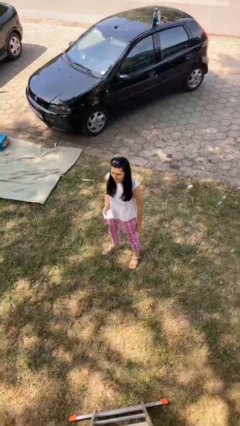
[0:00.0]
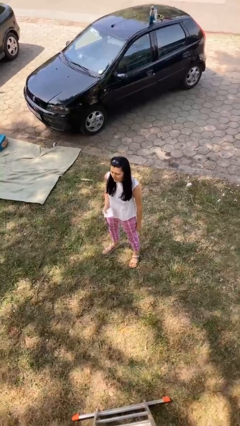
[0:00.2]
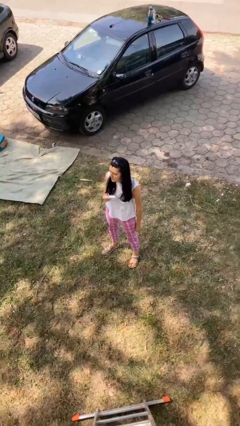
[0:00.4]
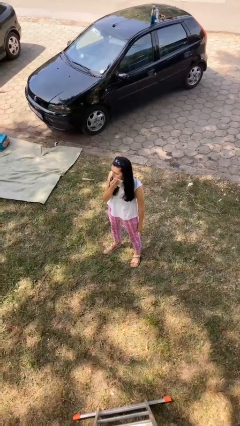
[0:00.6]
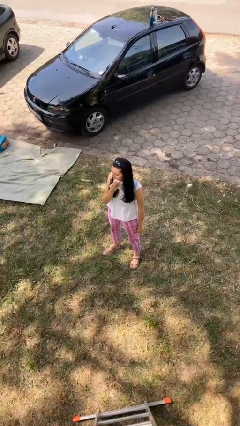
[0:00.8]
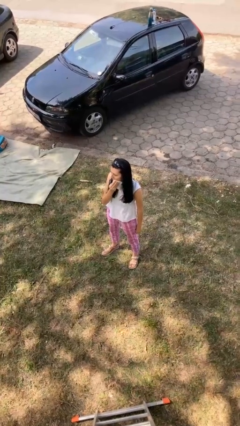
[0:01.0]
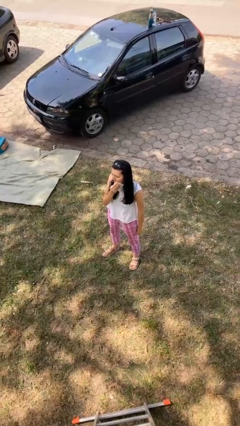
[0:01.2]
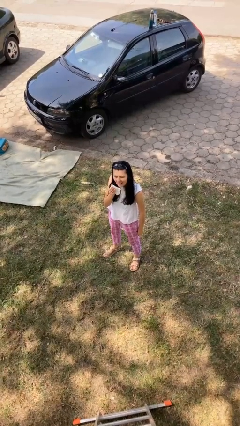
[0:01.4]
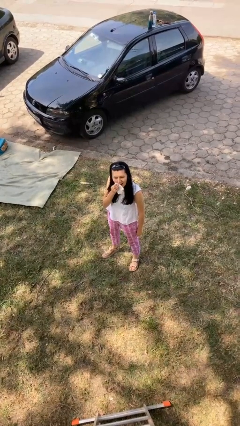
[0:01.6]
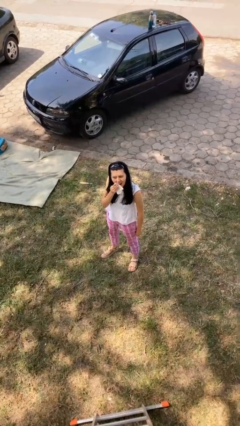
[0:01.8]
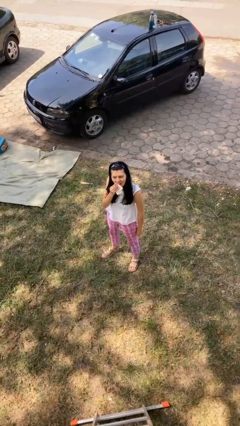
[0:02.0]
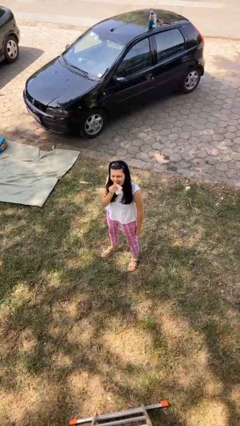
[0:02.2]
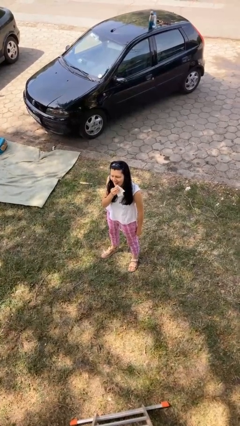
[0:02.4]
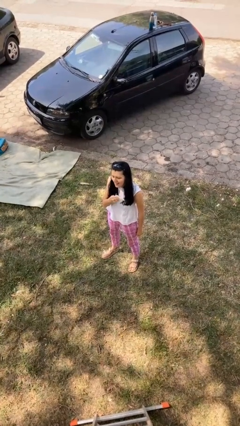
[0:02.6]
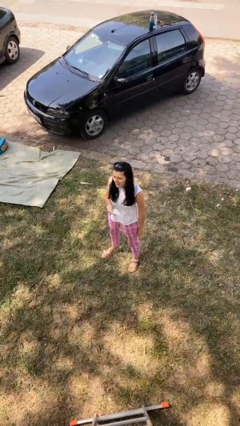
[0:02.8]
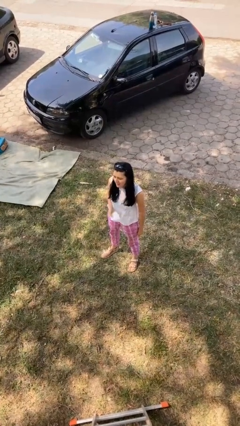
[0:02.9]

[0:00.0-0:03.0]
person wipes mouth with napkin

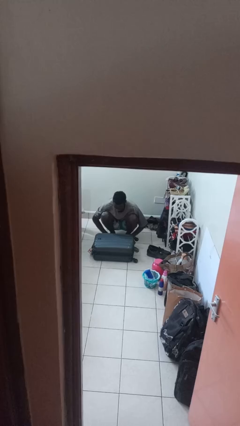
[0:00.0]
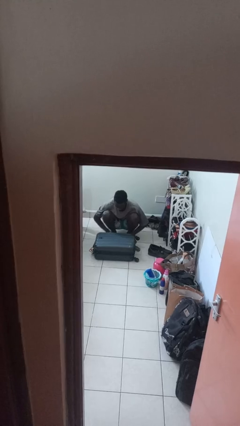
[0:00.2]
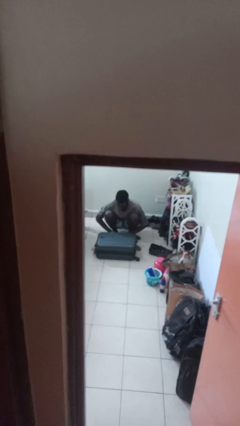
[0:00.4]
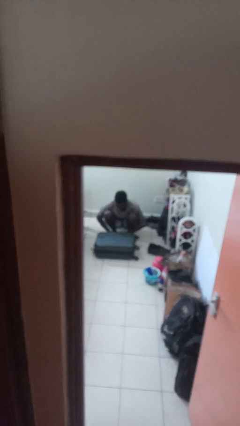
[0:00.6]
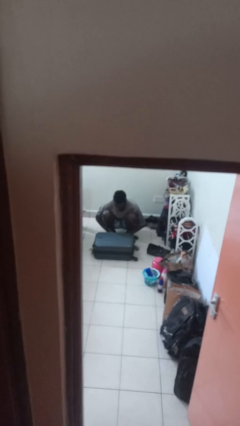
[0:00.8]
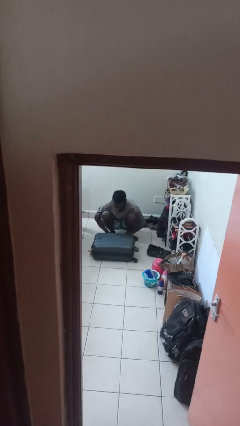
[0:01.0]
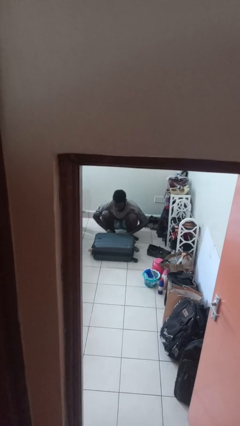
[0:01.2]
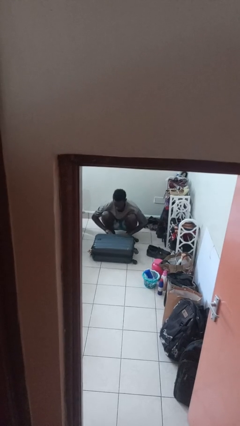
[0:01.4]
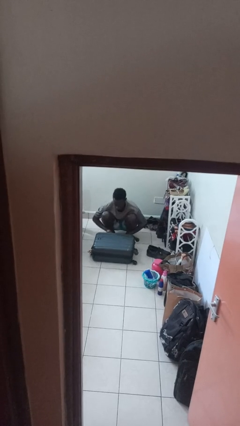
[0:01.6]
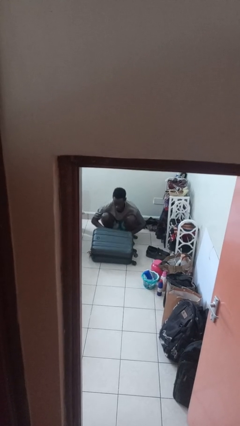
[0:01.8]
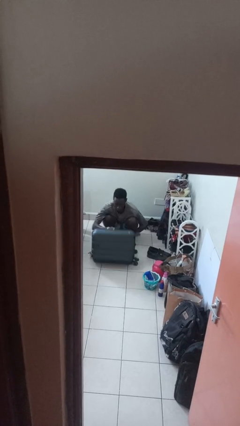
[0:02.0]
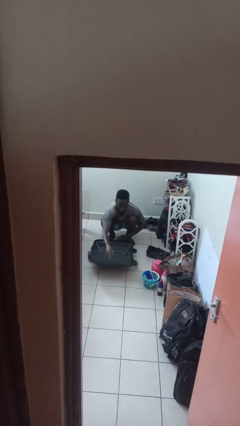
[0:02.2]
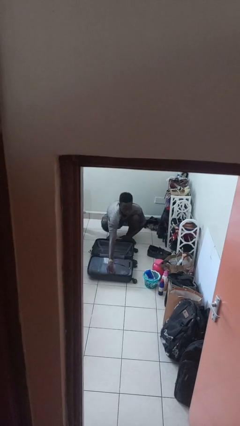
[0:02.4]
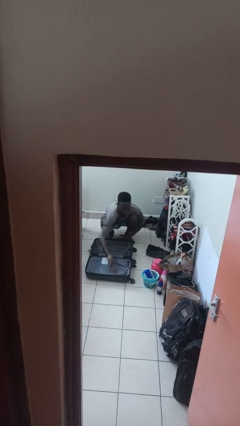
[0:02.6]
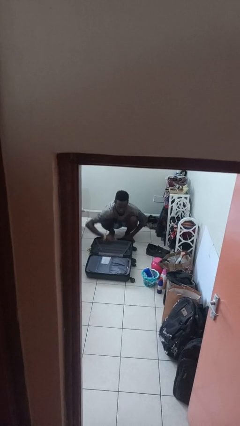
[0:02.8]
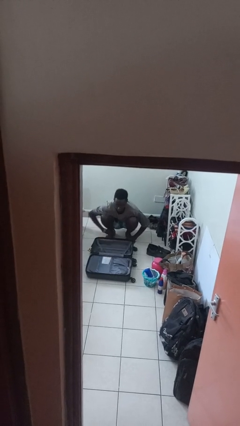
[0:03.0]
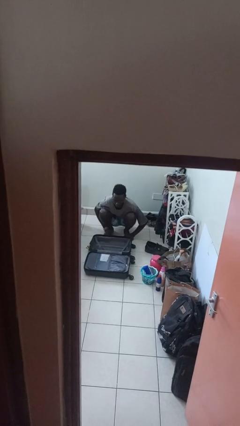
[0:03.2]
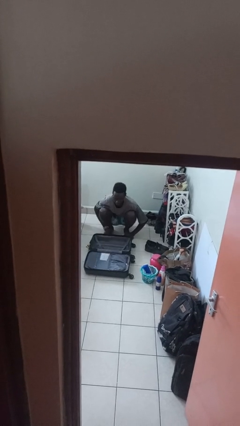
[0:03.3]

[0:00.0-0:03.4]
person opens suitcase

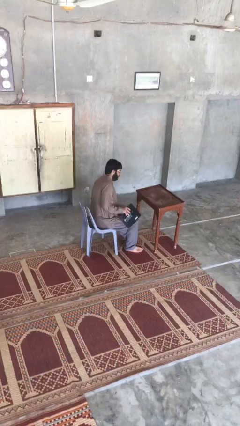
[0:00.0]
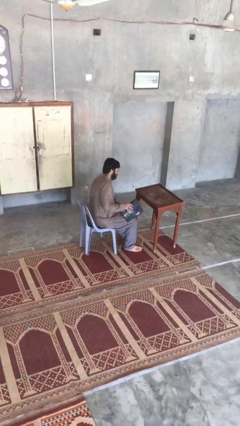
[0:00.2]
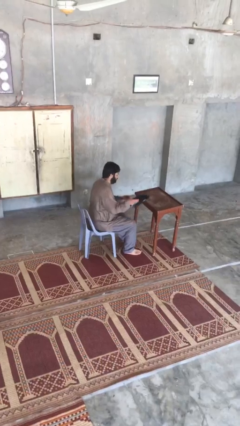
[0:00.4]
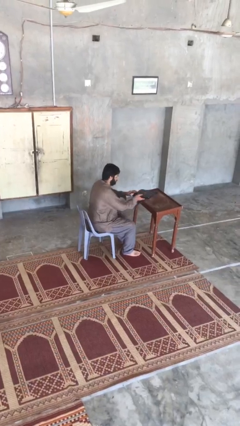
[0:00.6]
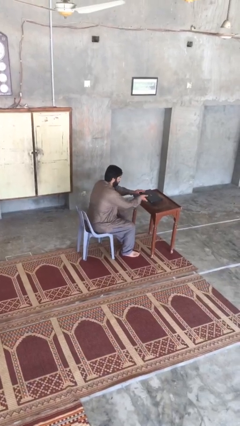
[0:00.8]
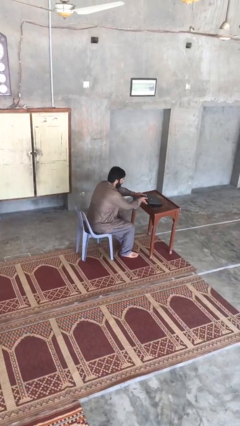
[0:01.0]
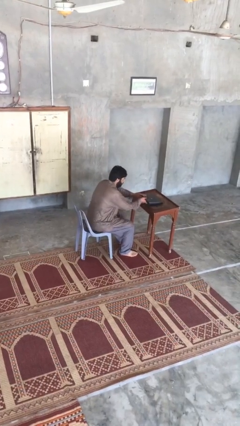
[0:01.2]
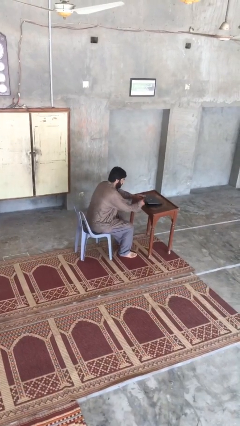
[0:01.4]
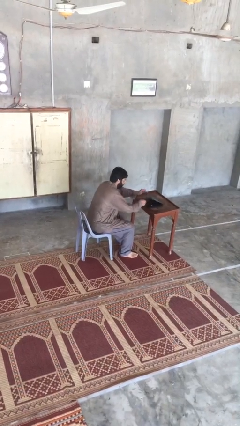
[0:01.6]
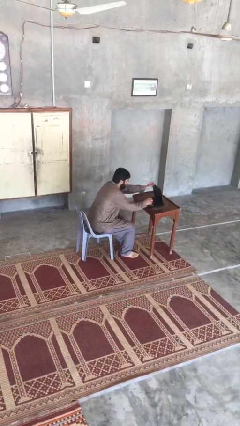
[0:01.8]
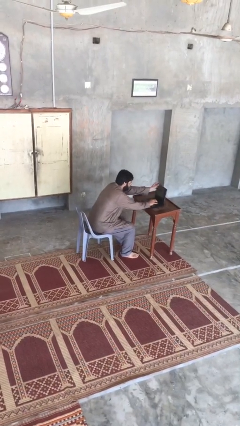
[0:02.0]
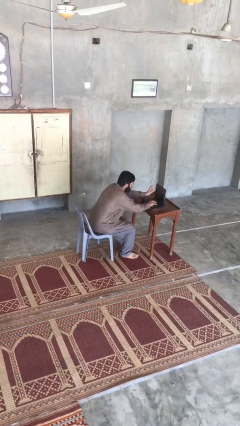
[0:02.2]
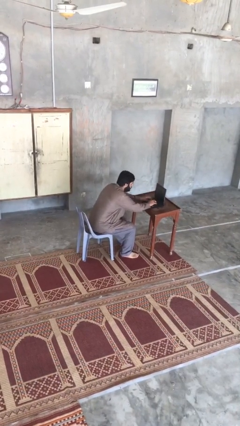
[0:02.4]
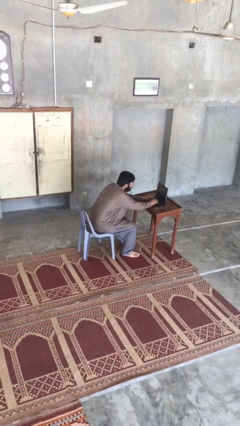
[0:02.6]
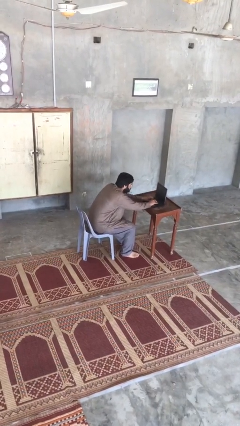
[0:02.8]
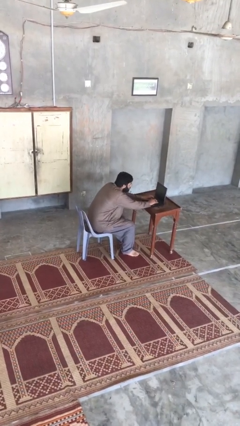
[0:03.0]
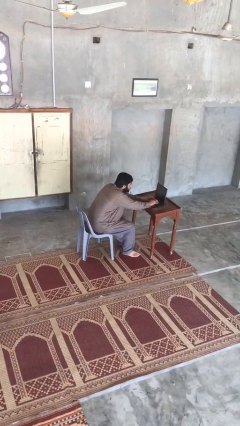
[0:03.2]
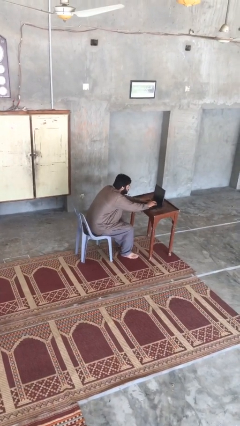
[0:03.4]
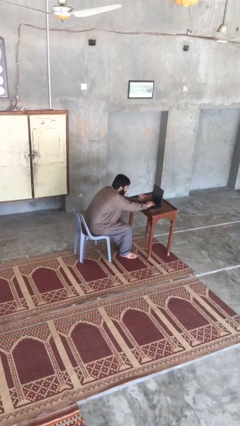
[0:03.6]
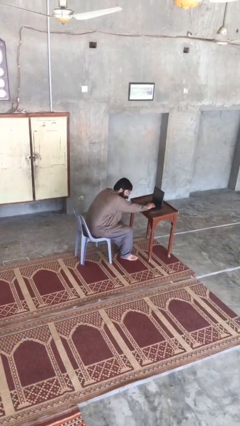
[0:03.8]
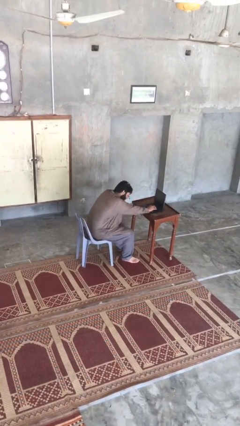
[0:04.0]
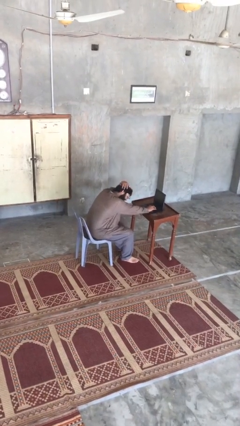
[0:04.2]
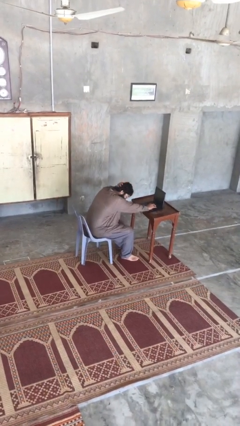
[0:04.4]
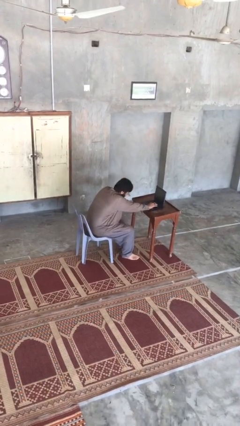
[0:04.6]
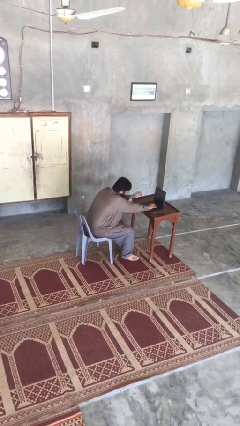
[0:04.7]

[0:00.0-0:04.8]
person interacts with laptop

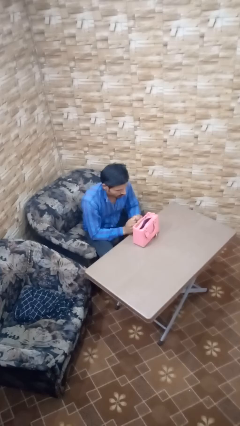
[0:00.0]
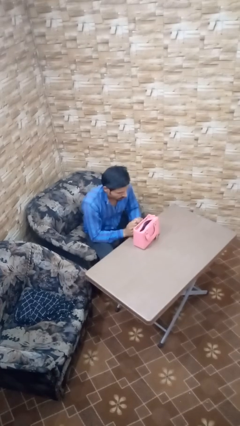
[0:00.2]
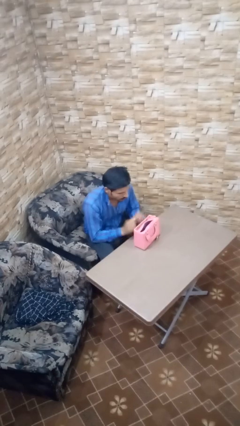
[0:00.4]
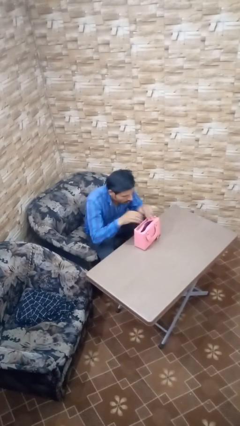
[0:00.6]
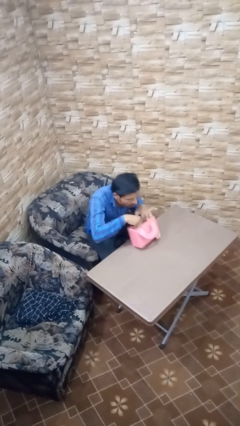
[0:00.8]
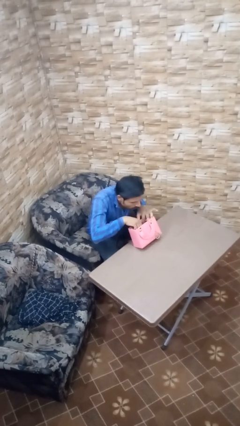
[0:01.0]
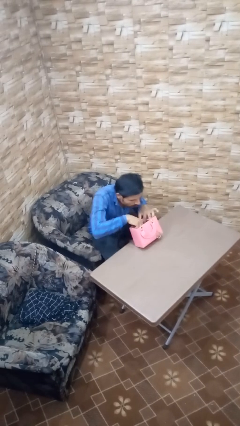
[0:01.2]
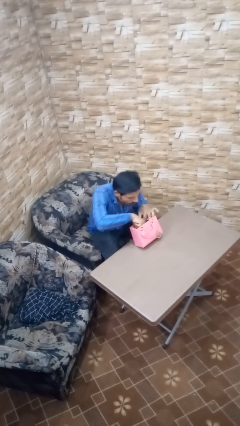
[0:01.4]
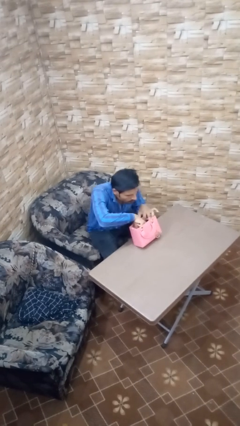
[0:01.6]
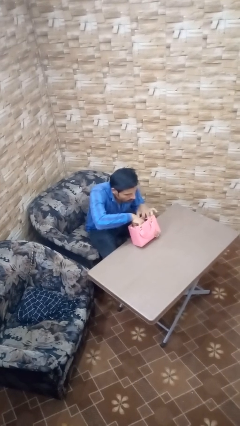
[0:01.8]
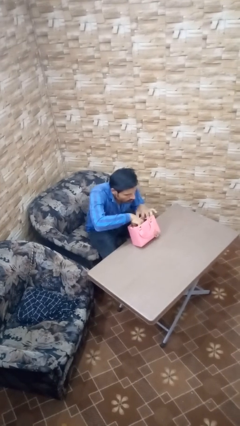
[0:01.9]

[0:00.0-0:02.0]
person searches in purse

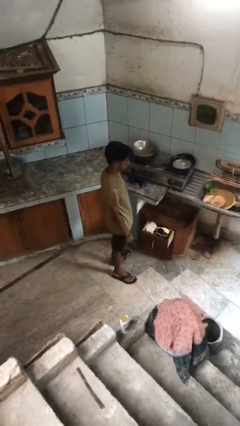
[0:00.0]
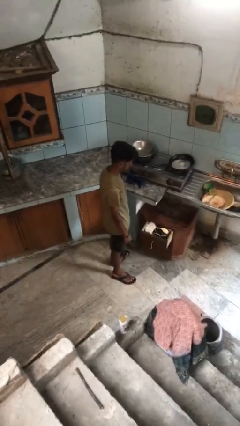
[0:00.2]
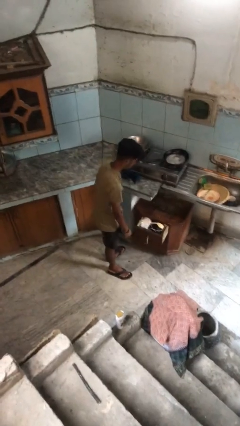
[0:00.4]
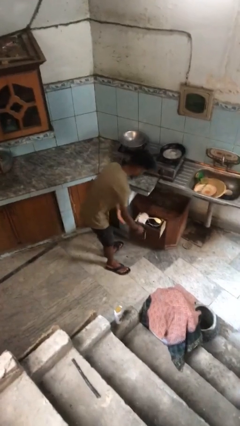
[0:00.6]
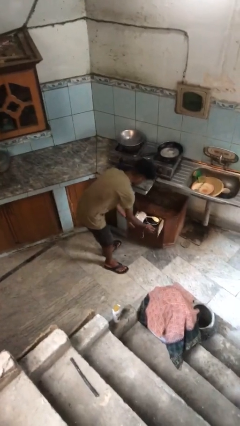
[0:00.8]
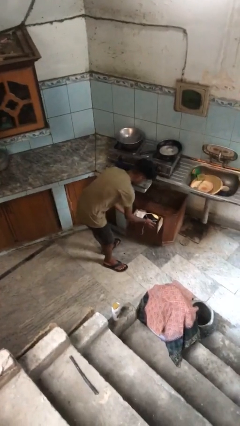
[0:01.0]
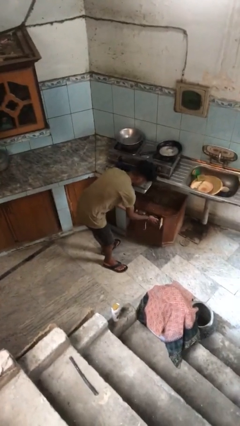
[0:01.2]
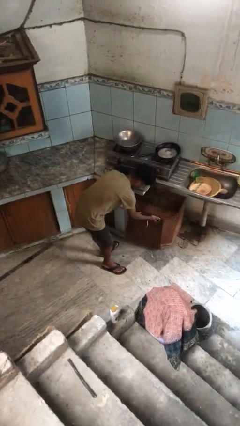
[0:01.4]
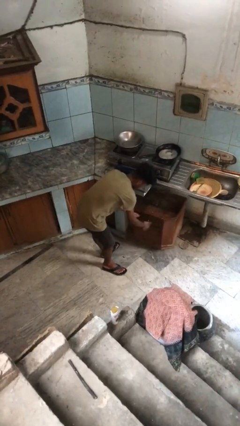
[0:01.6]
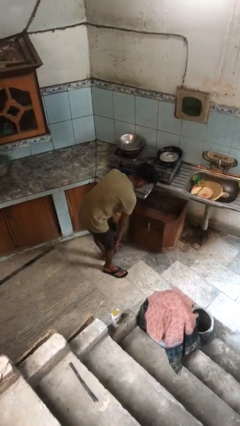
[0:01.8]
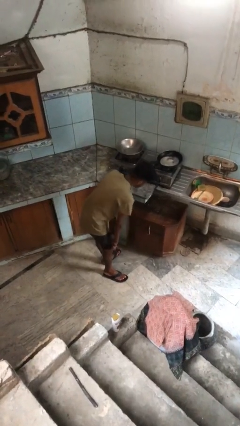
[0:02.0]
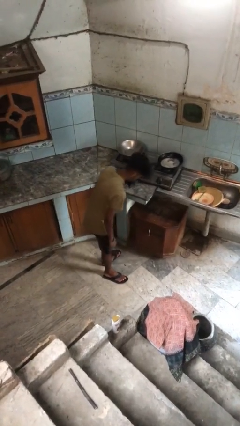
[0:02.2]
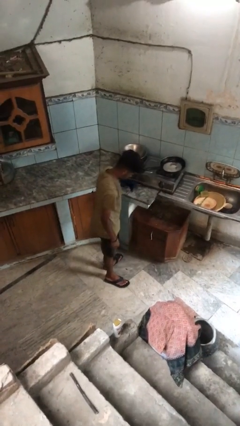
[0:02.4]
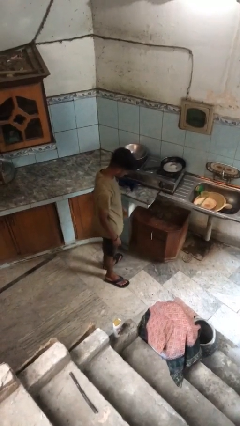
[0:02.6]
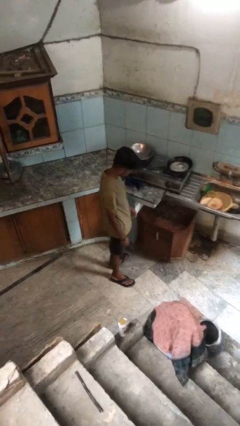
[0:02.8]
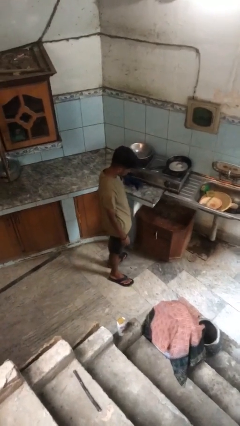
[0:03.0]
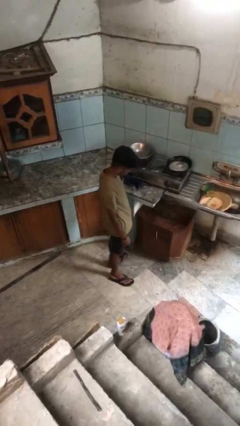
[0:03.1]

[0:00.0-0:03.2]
person closes kitchen drawer

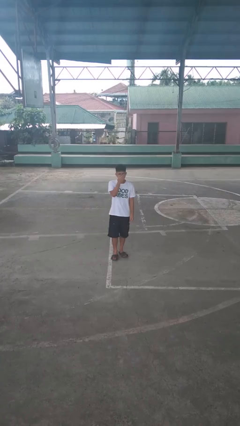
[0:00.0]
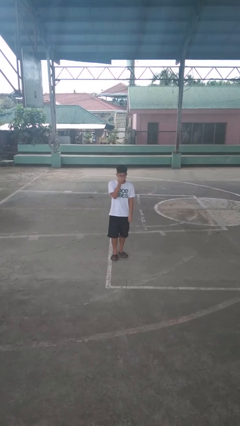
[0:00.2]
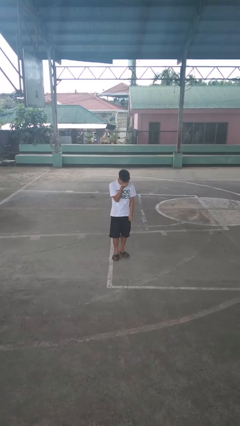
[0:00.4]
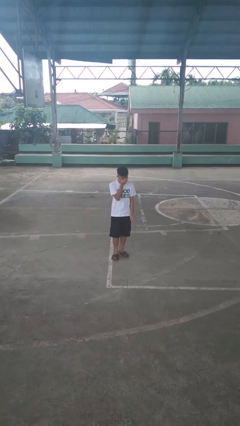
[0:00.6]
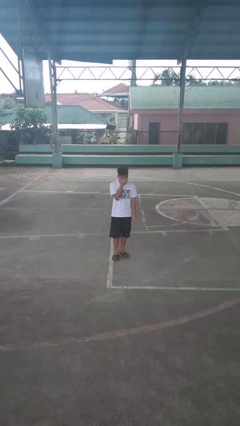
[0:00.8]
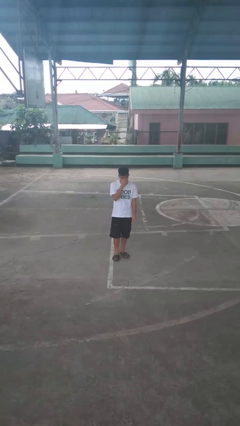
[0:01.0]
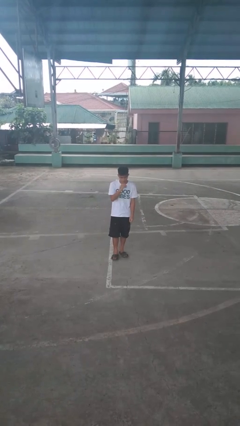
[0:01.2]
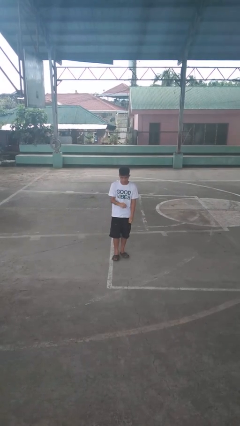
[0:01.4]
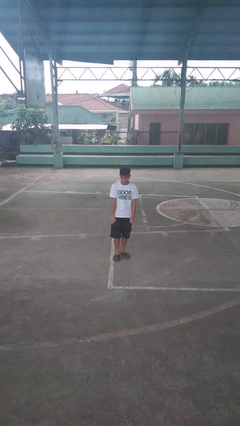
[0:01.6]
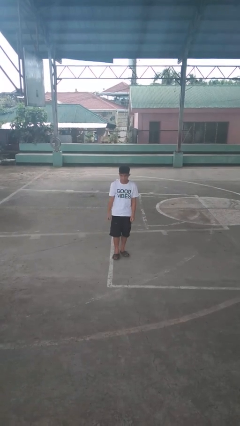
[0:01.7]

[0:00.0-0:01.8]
person sneezes into hand
